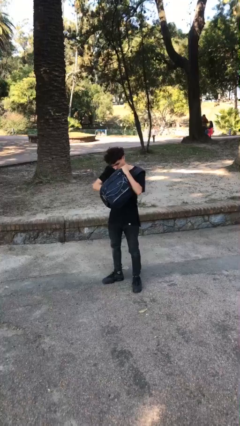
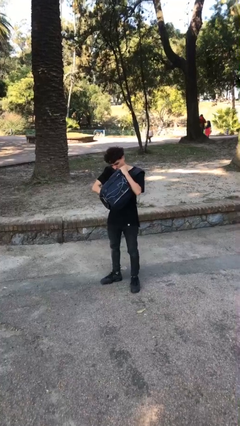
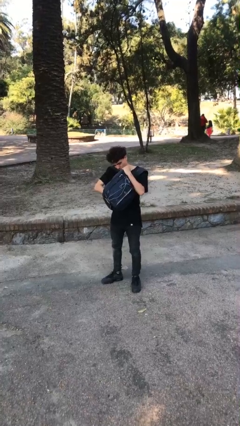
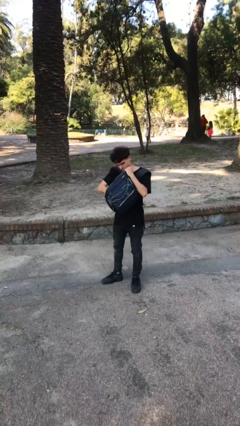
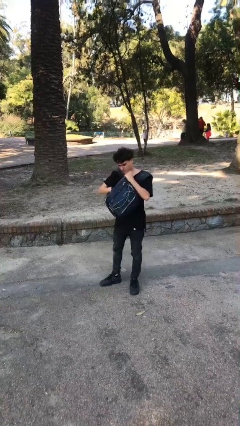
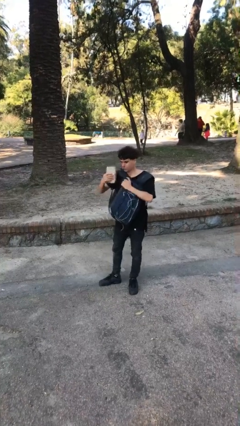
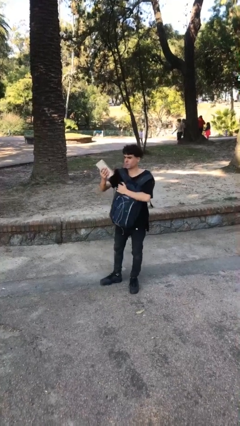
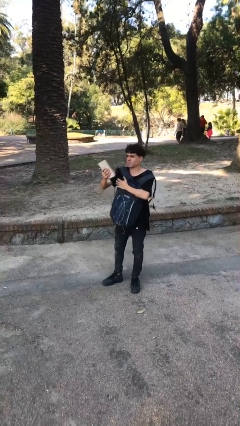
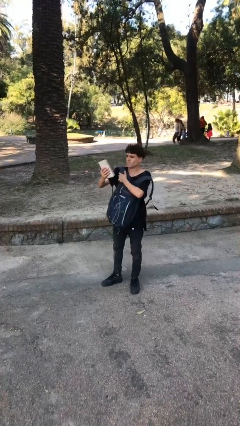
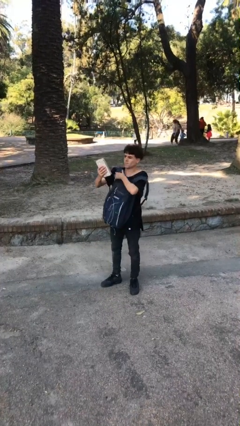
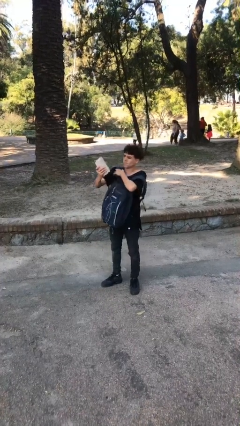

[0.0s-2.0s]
person takes object from backpack

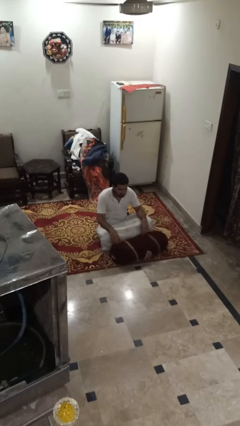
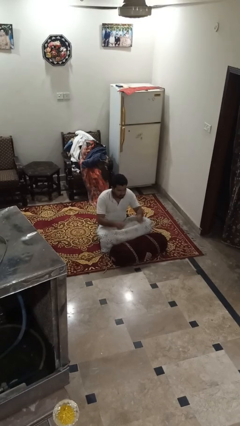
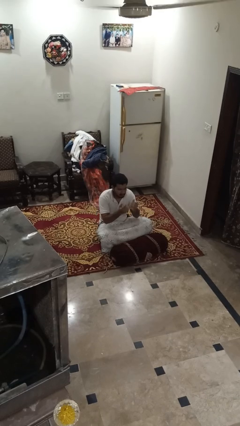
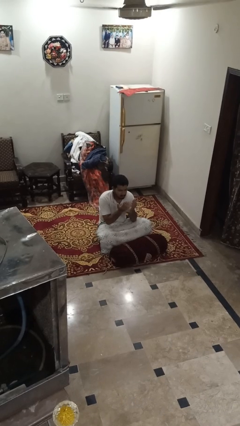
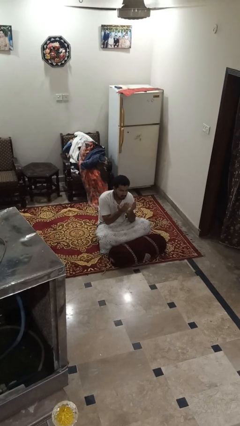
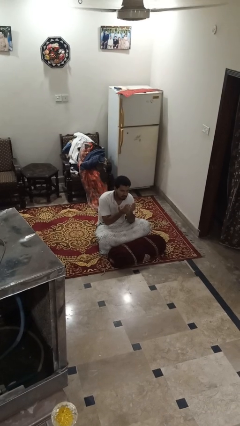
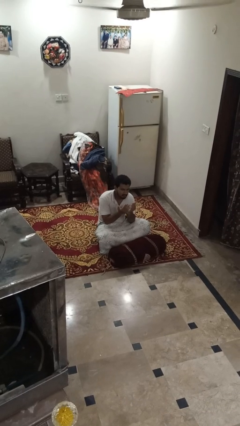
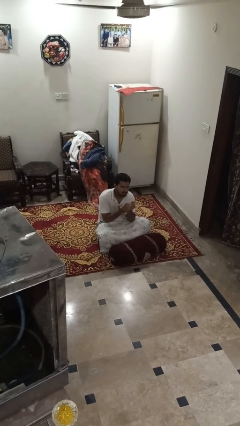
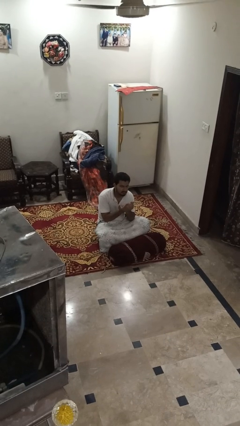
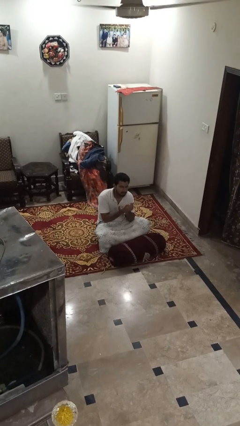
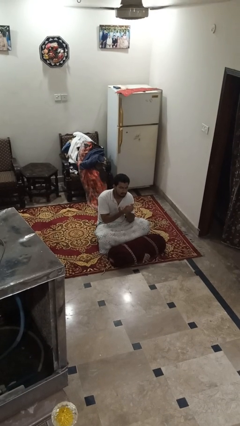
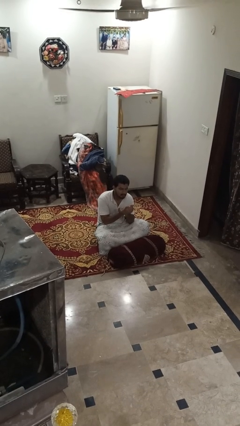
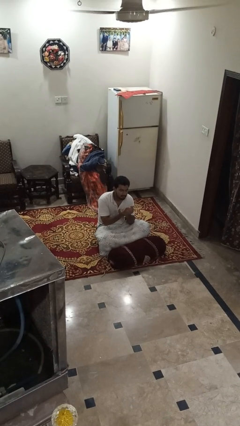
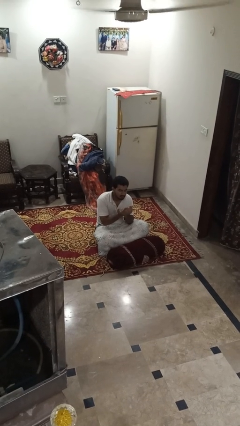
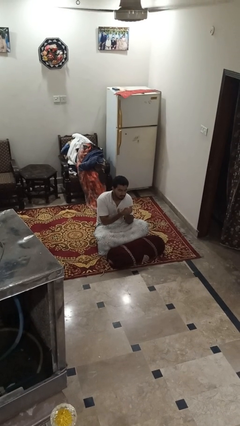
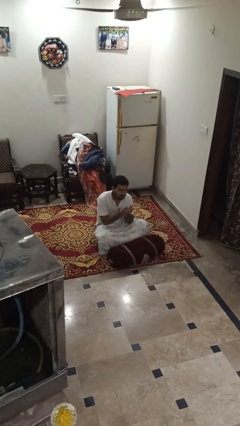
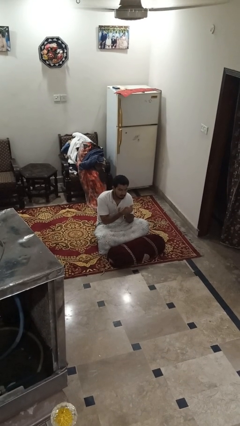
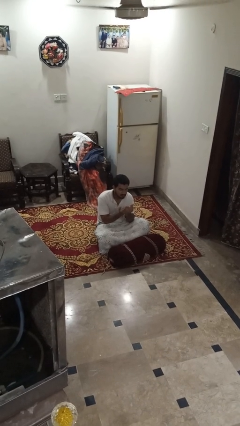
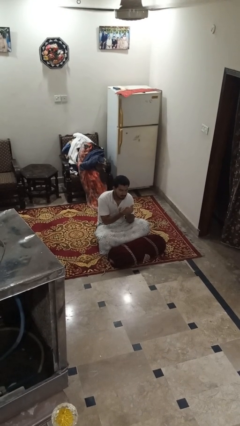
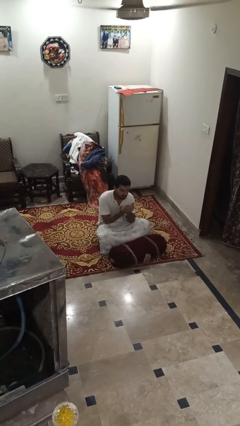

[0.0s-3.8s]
person prays

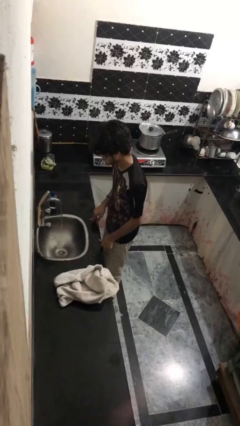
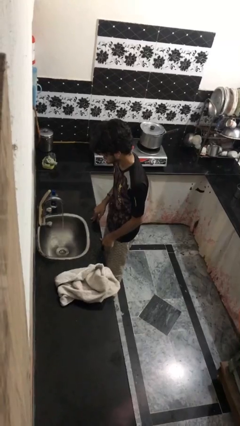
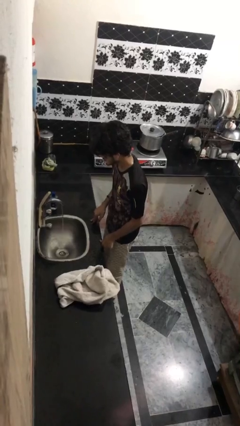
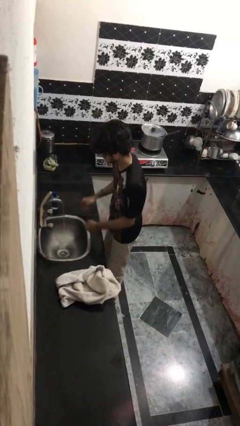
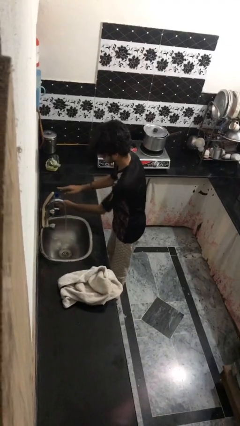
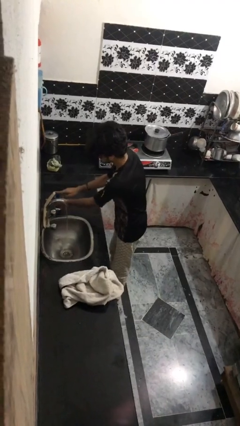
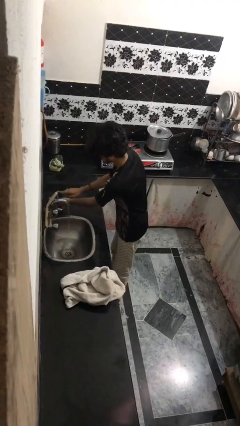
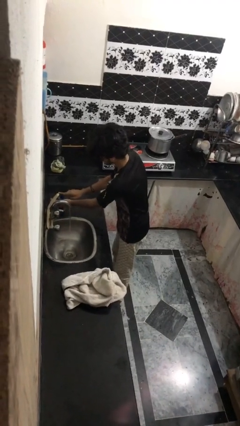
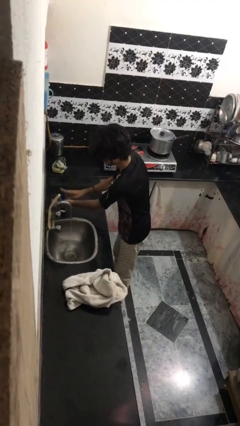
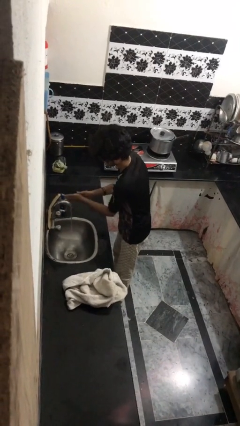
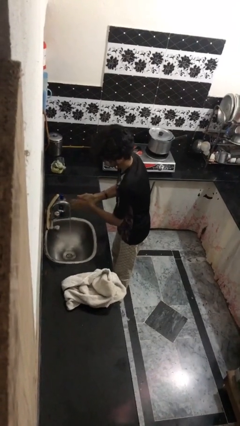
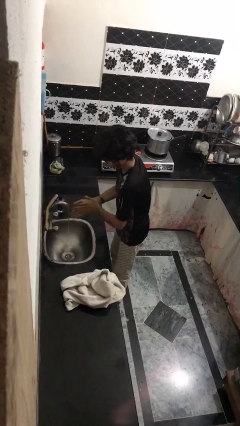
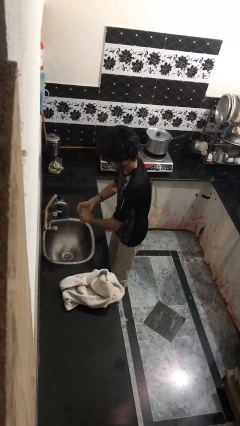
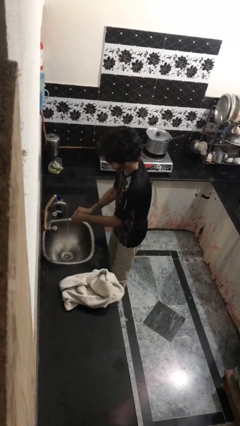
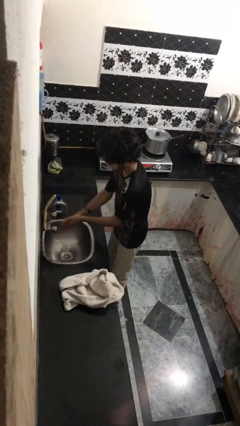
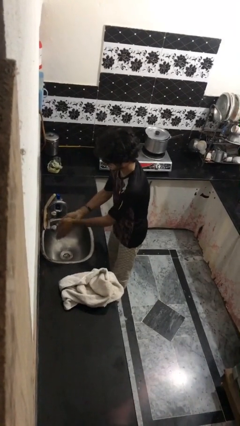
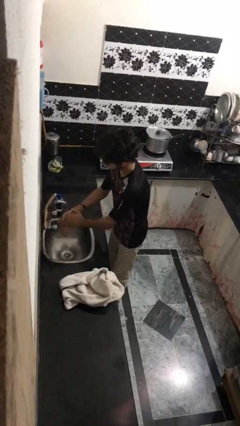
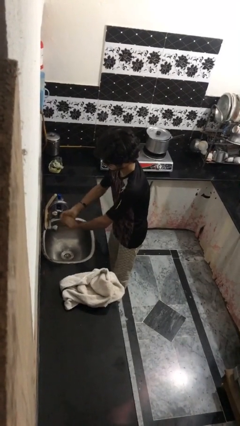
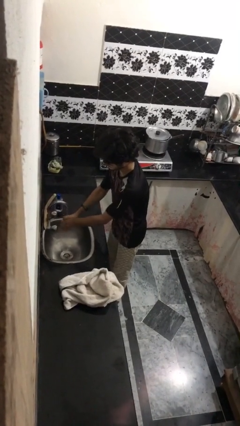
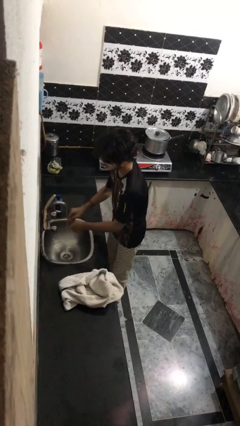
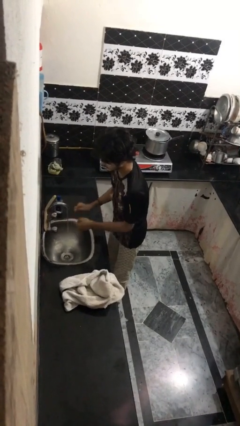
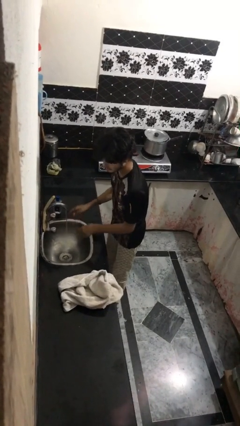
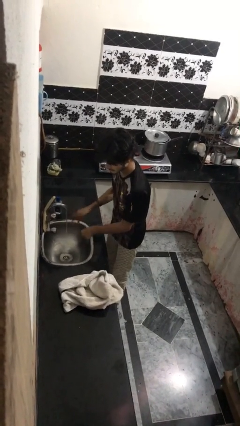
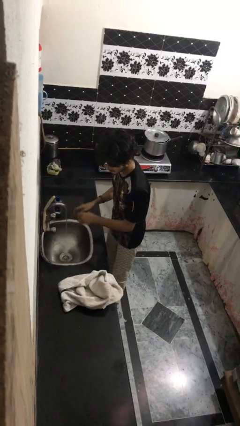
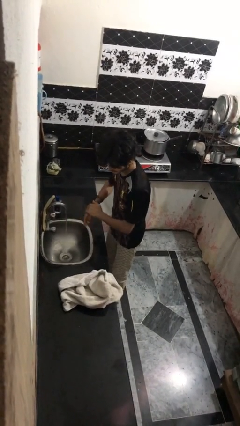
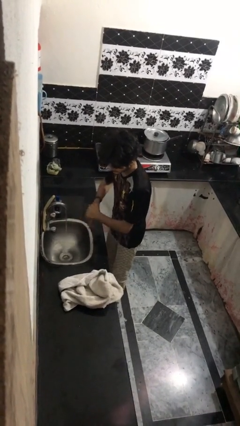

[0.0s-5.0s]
person washes hands

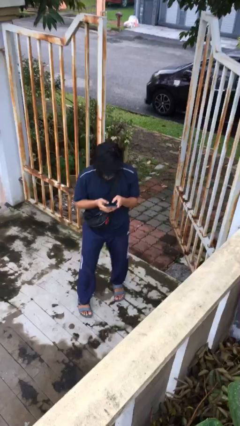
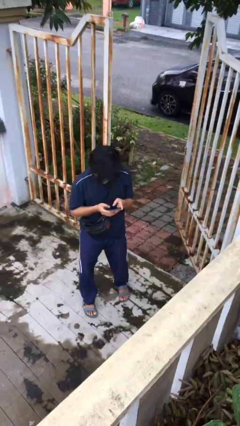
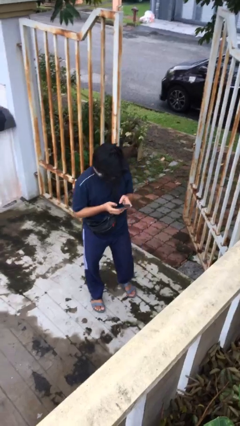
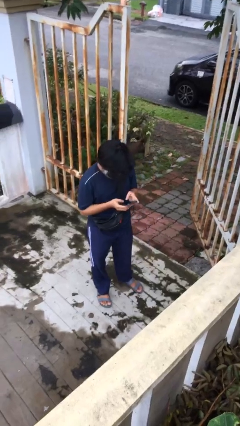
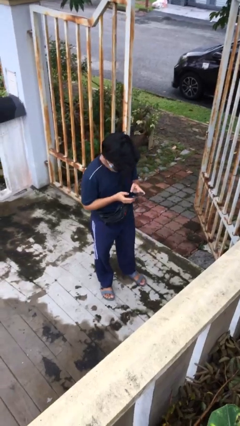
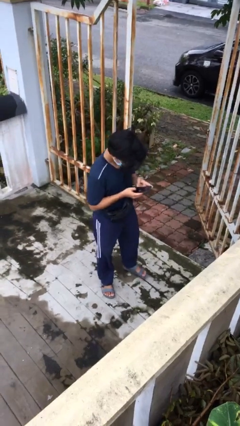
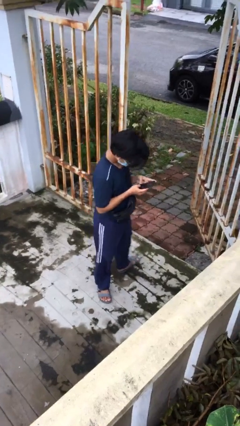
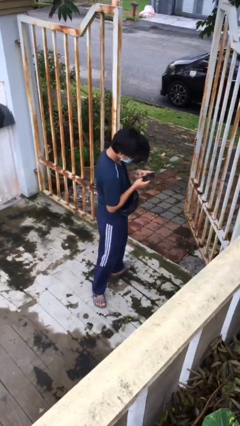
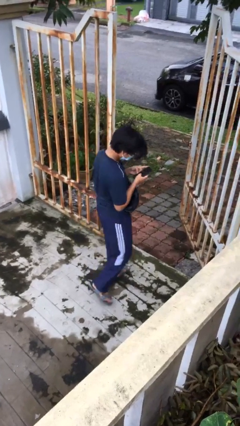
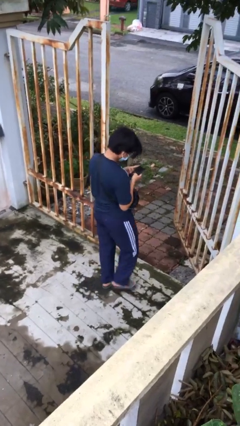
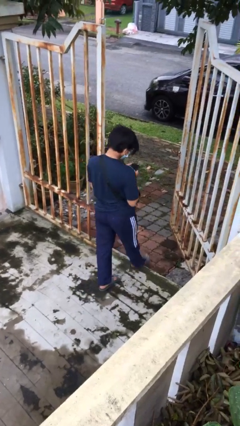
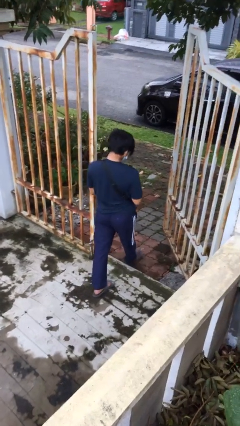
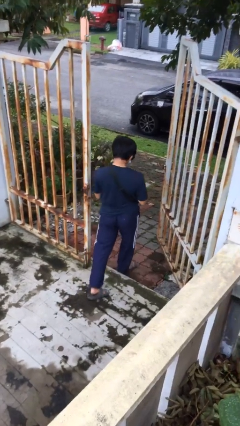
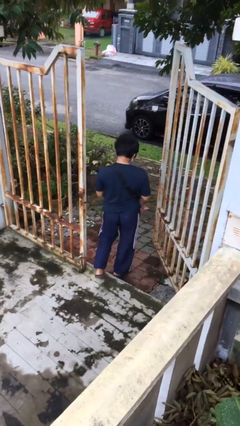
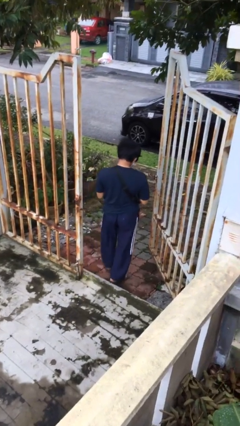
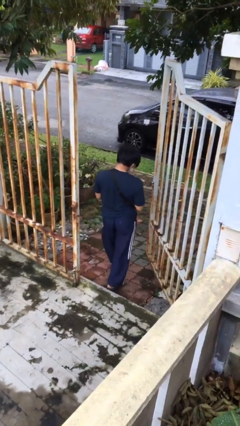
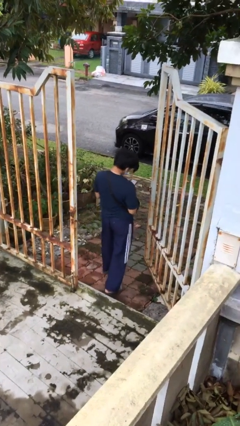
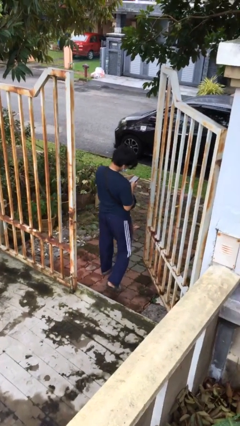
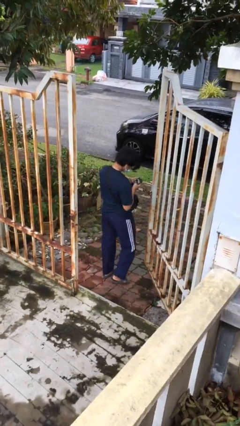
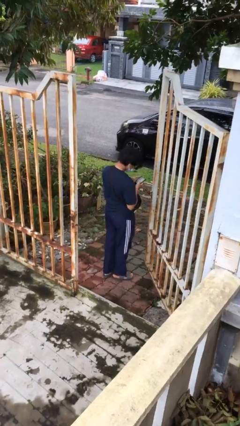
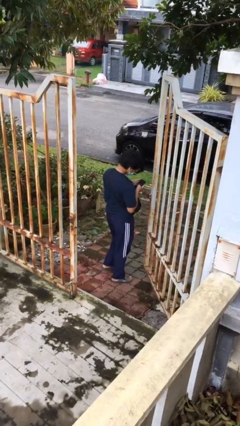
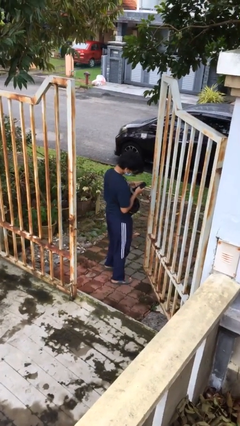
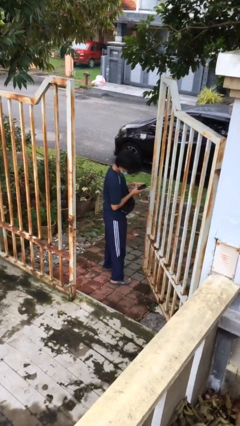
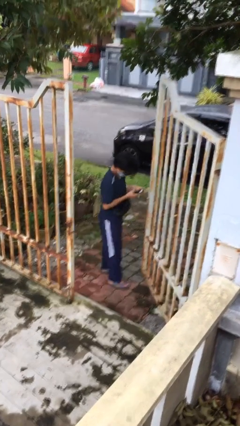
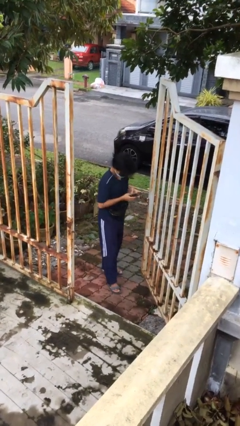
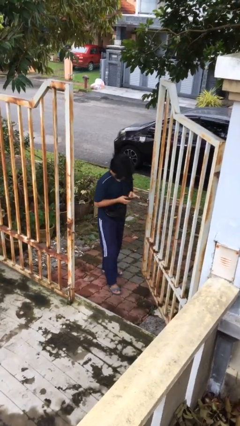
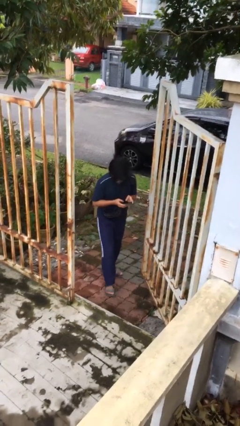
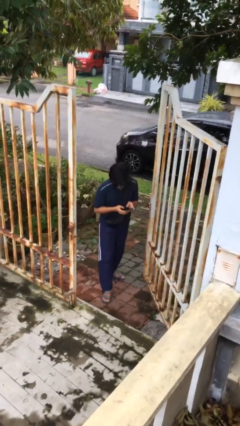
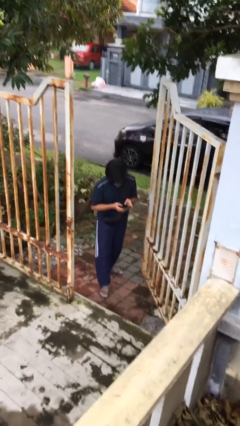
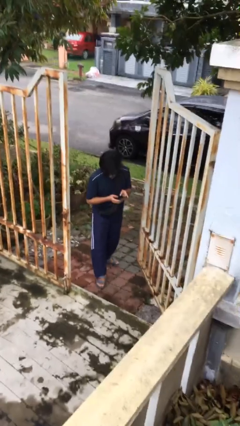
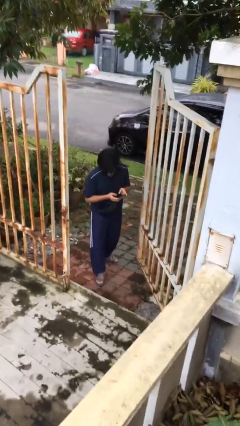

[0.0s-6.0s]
person exits scene through structure

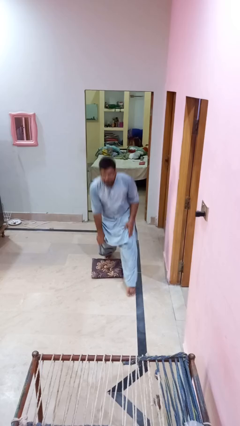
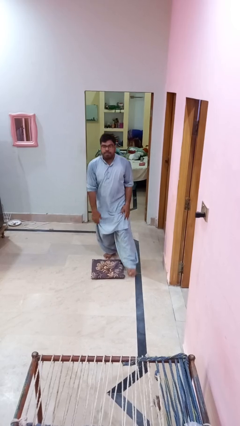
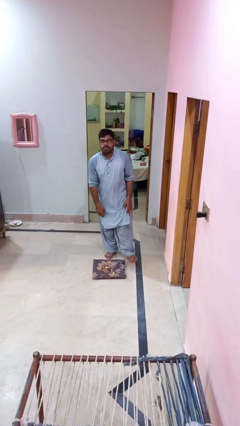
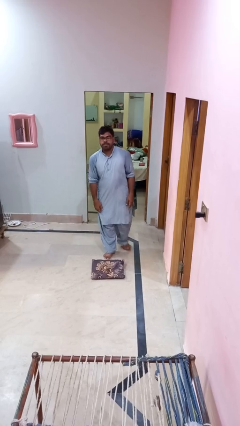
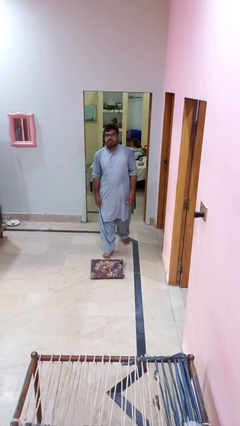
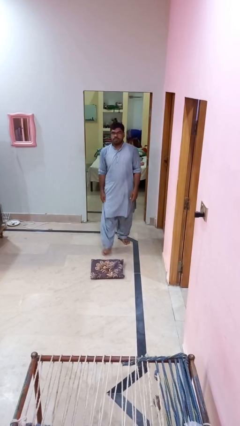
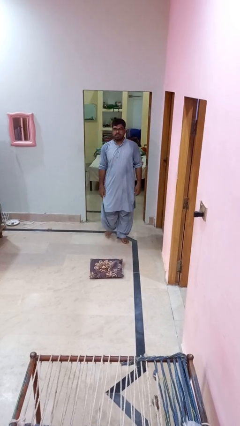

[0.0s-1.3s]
person stands up from floor
